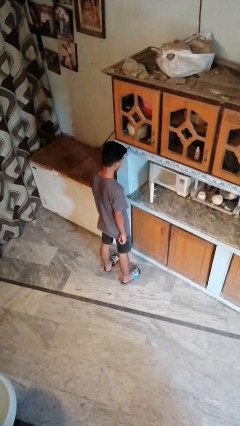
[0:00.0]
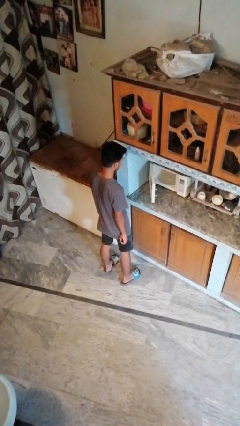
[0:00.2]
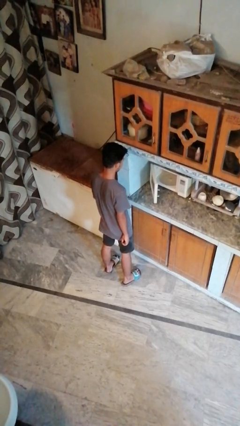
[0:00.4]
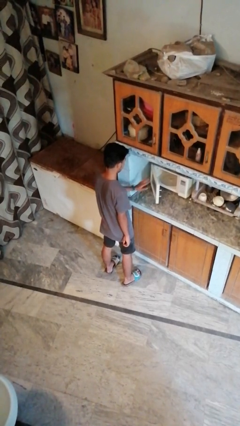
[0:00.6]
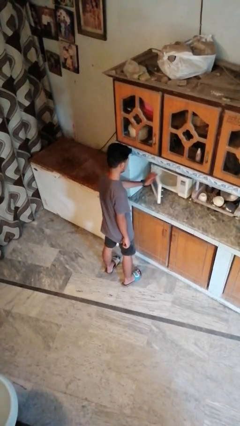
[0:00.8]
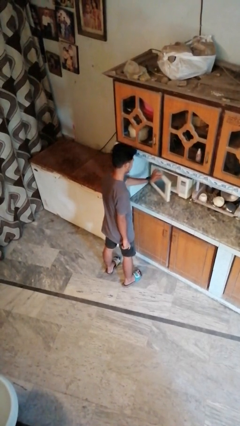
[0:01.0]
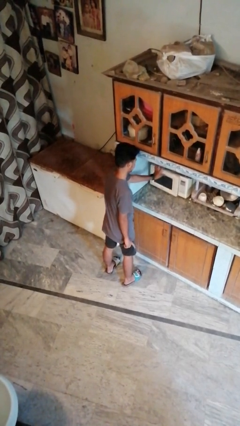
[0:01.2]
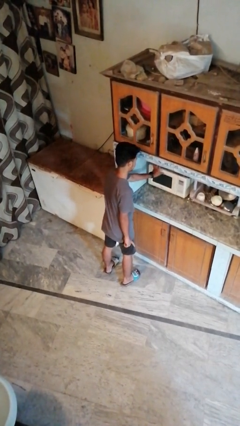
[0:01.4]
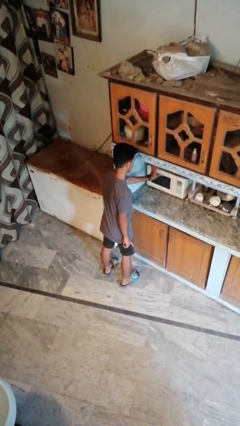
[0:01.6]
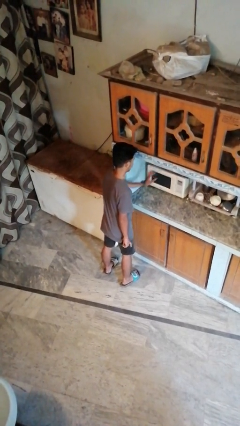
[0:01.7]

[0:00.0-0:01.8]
person closes oven door

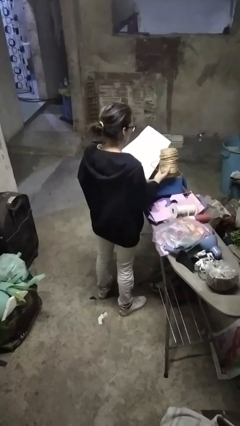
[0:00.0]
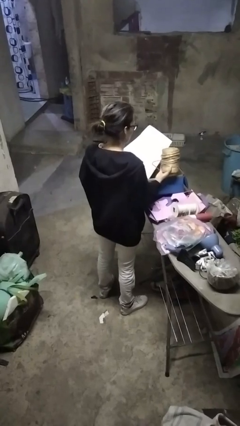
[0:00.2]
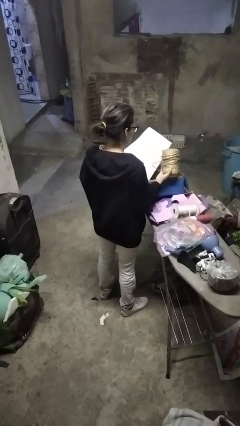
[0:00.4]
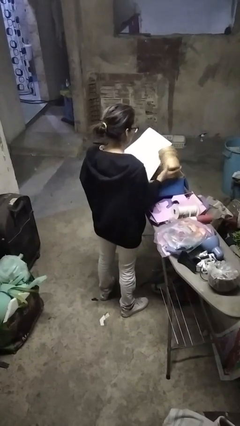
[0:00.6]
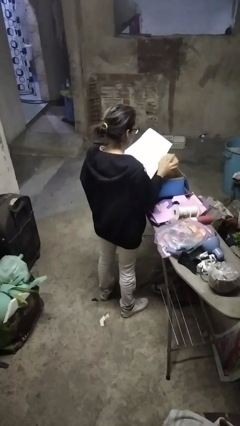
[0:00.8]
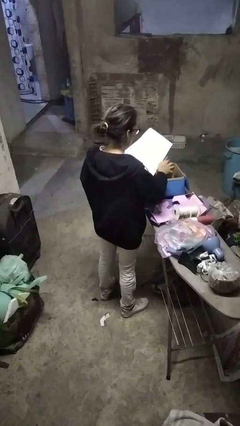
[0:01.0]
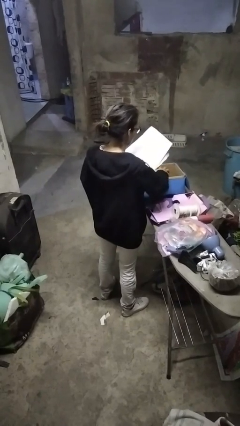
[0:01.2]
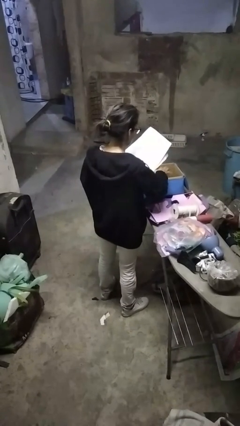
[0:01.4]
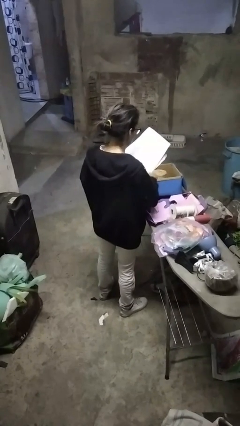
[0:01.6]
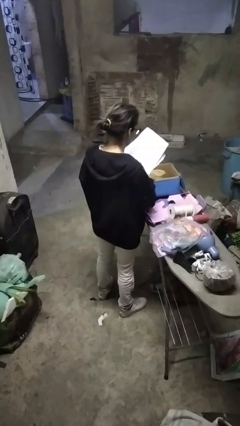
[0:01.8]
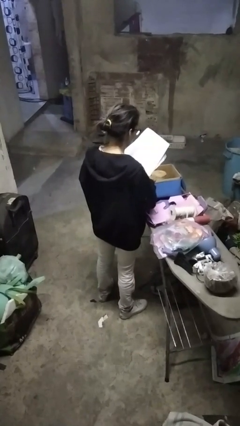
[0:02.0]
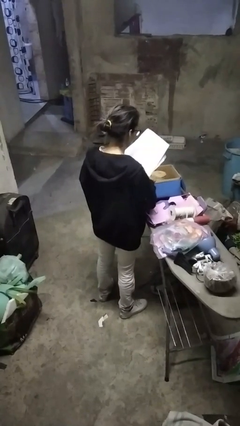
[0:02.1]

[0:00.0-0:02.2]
person puts object into box

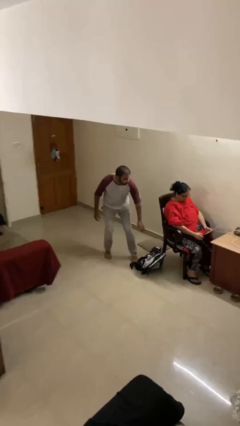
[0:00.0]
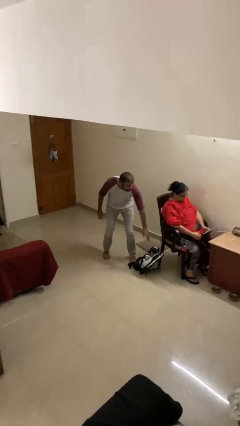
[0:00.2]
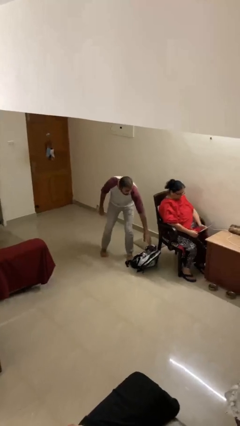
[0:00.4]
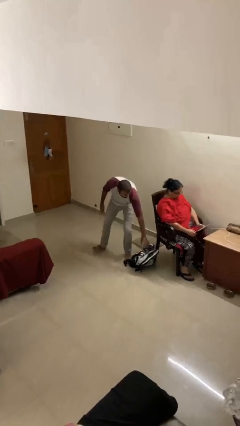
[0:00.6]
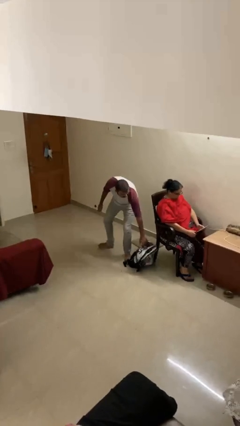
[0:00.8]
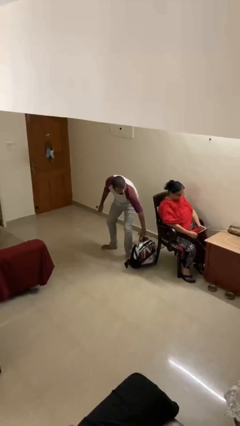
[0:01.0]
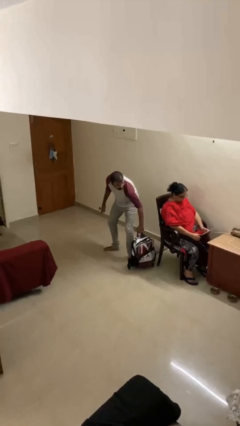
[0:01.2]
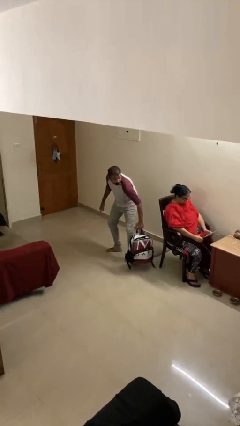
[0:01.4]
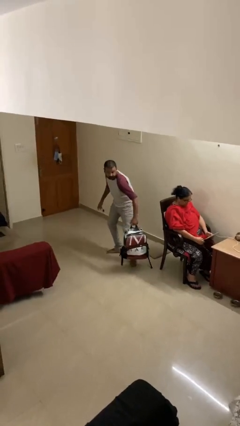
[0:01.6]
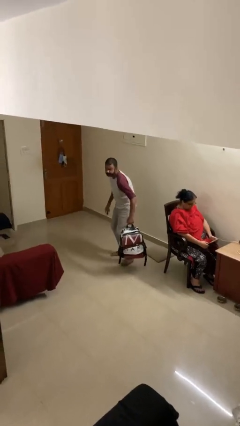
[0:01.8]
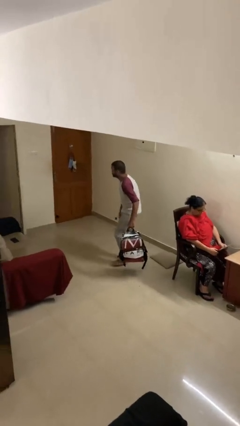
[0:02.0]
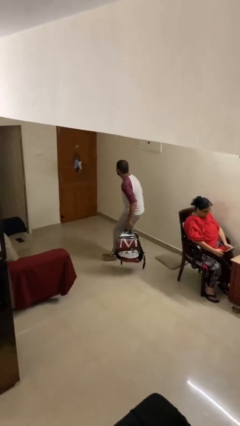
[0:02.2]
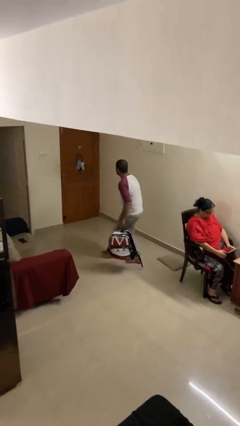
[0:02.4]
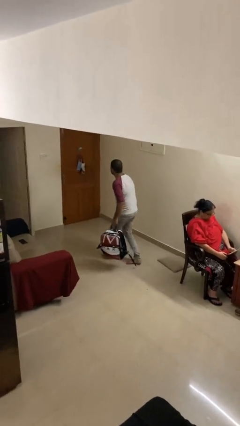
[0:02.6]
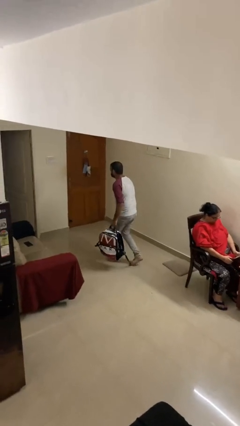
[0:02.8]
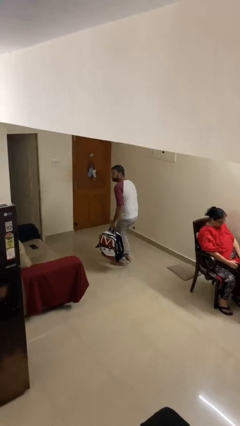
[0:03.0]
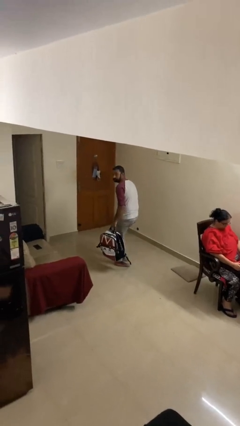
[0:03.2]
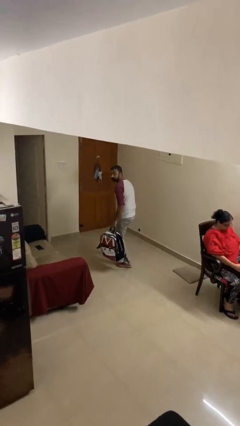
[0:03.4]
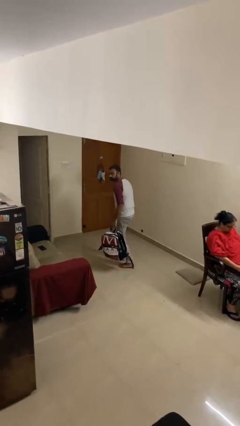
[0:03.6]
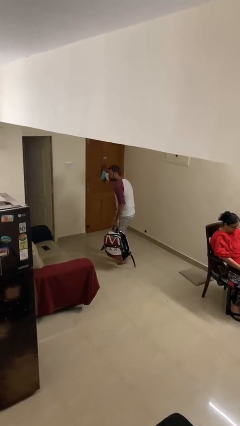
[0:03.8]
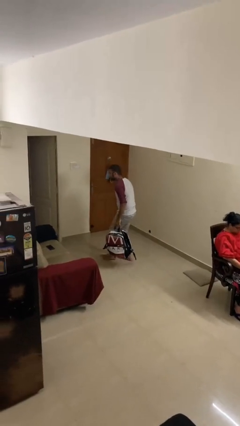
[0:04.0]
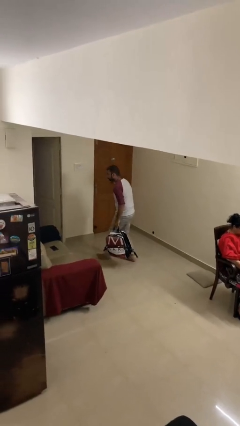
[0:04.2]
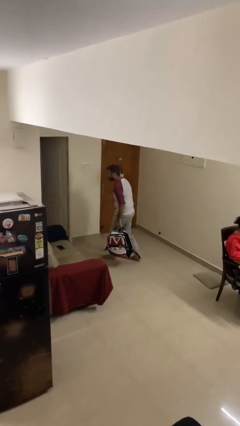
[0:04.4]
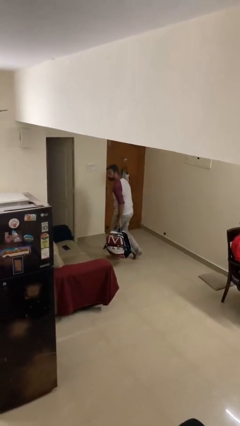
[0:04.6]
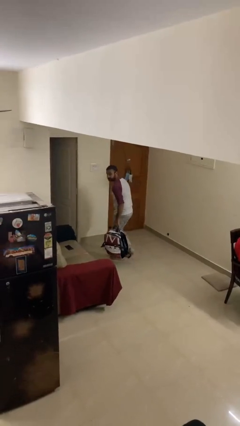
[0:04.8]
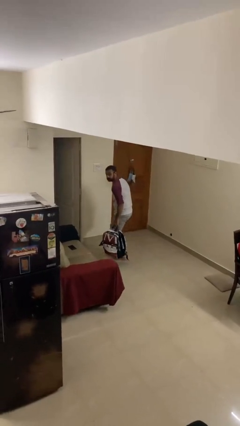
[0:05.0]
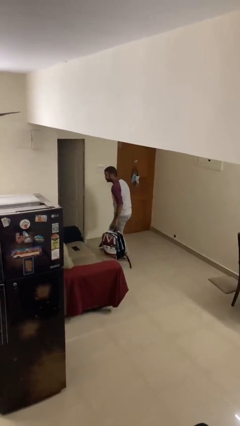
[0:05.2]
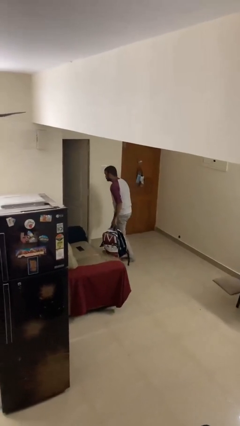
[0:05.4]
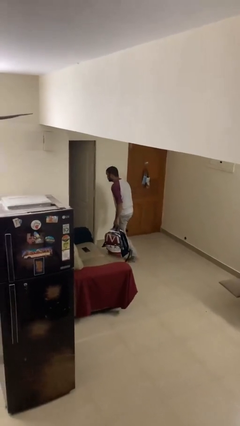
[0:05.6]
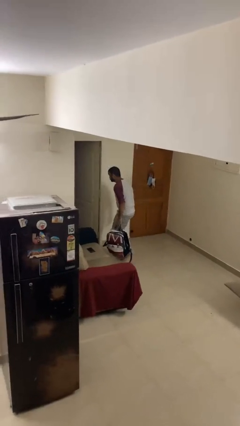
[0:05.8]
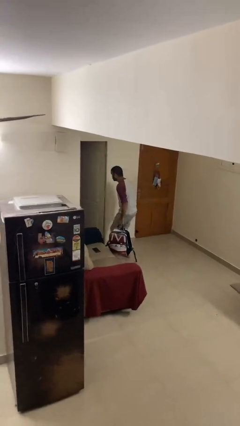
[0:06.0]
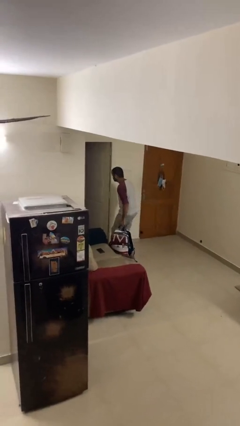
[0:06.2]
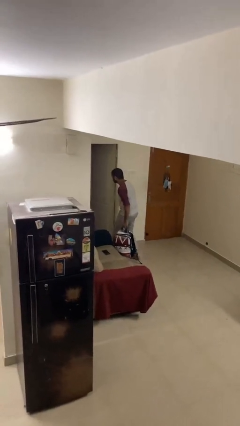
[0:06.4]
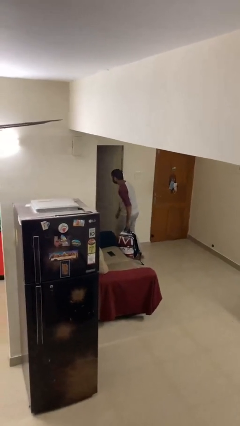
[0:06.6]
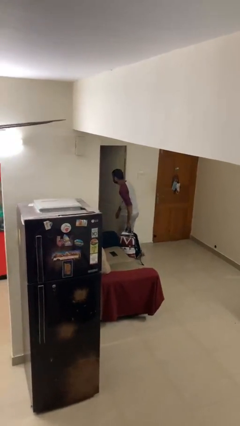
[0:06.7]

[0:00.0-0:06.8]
person steals object from person

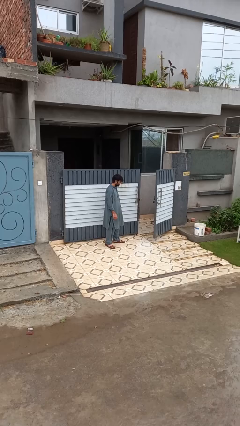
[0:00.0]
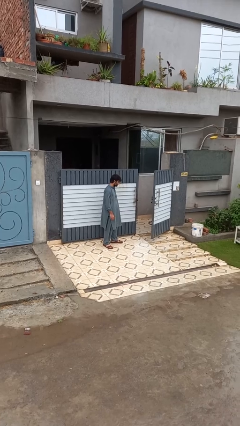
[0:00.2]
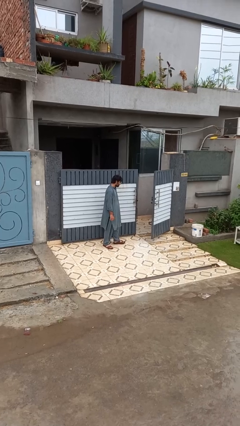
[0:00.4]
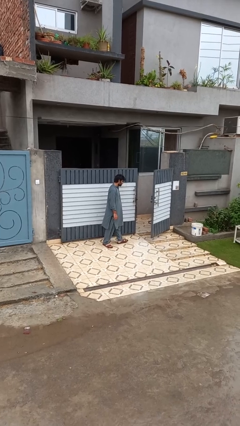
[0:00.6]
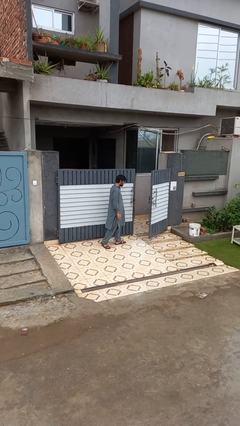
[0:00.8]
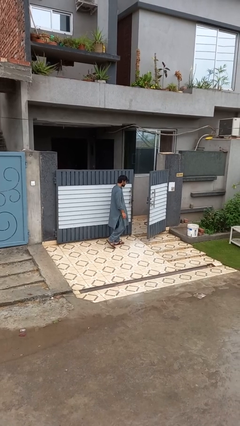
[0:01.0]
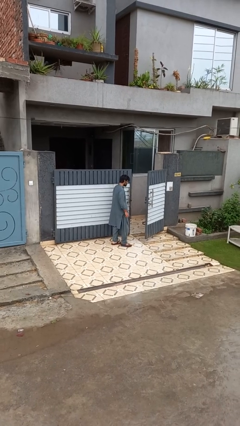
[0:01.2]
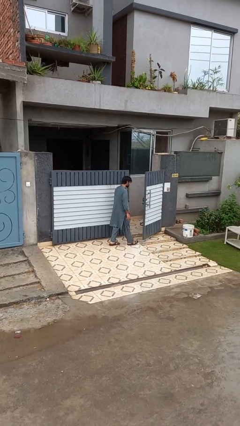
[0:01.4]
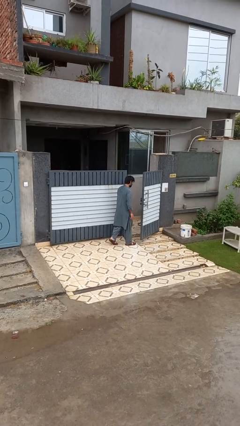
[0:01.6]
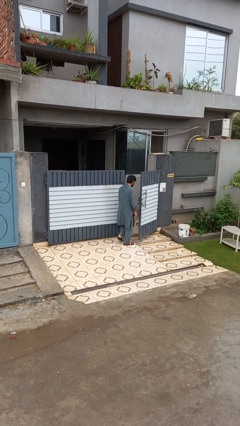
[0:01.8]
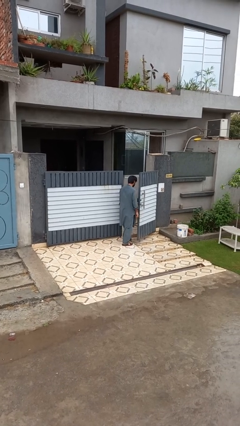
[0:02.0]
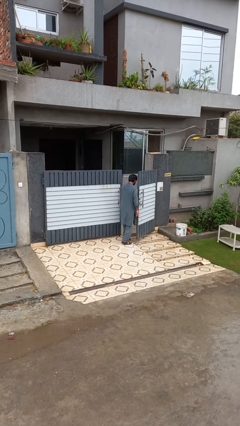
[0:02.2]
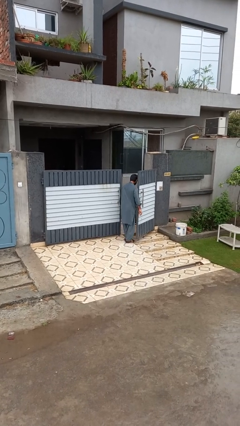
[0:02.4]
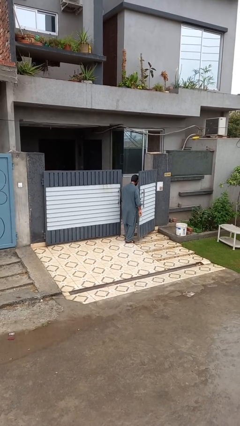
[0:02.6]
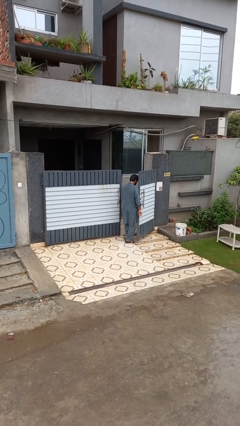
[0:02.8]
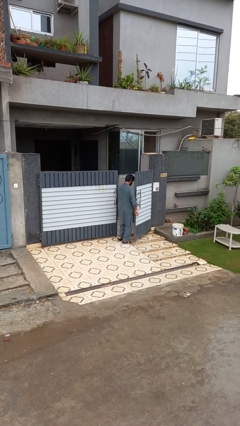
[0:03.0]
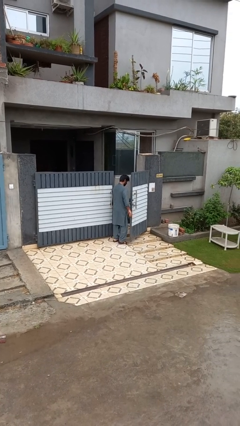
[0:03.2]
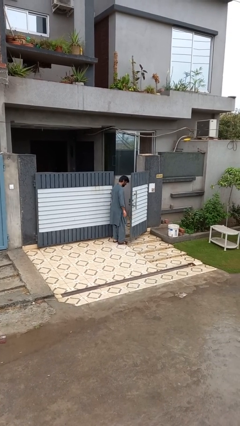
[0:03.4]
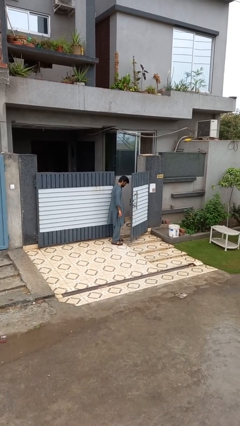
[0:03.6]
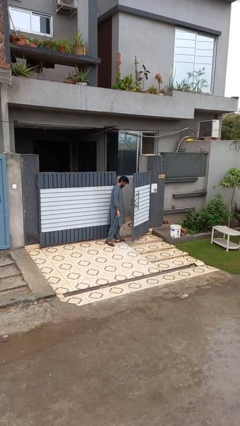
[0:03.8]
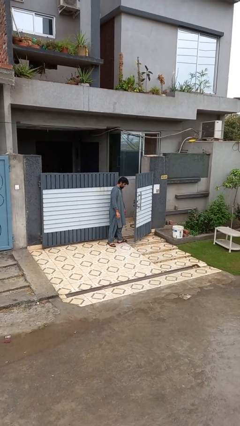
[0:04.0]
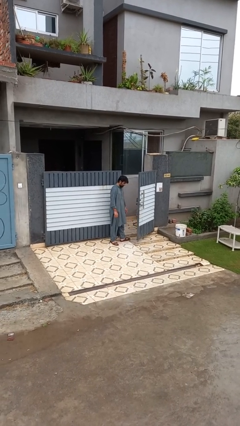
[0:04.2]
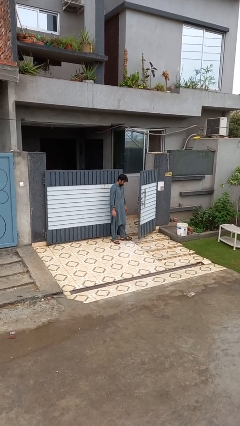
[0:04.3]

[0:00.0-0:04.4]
person bumps into wall

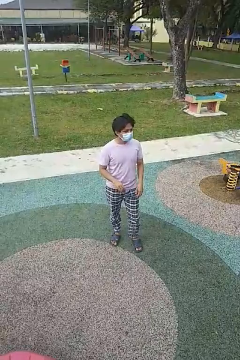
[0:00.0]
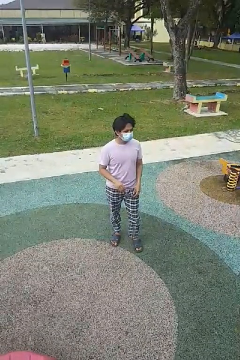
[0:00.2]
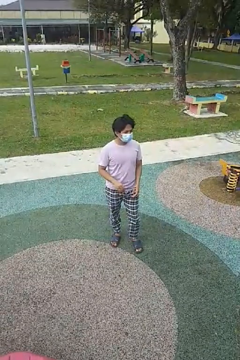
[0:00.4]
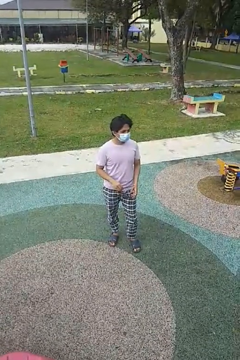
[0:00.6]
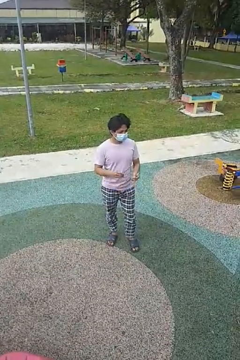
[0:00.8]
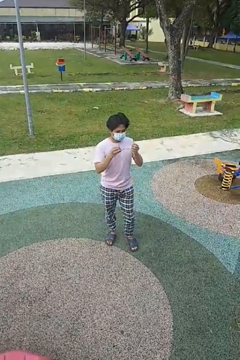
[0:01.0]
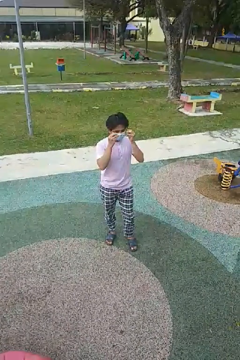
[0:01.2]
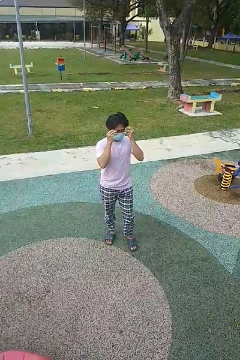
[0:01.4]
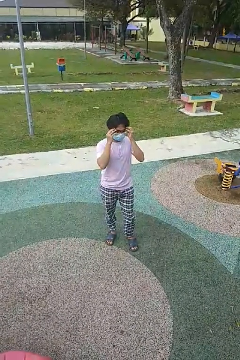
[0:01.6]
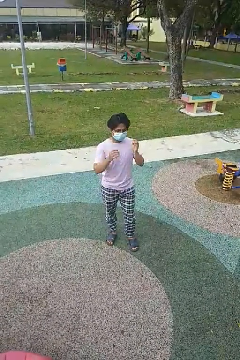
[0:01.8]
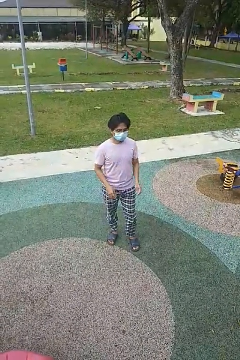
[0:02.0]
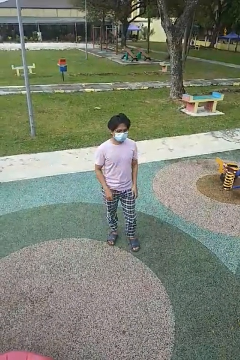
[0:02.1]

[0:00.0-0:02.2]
person puts on glasses

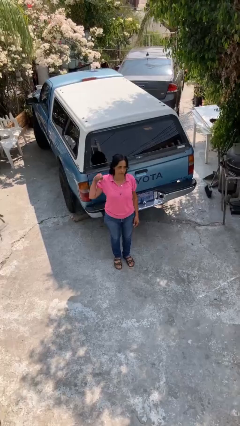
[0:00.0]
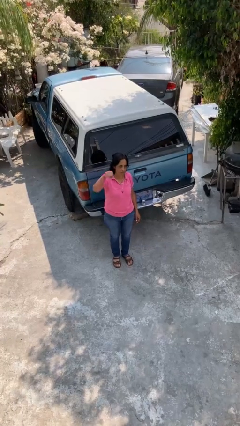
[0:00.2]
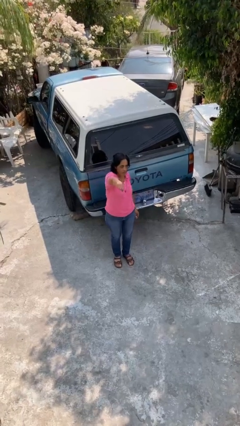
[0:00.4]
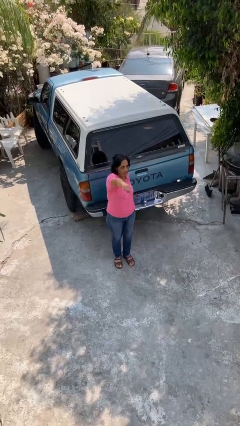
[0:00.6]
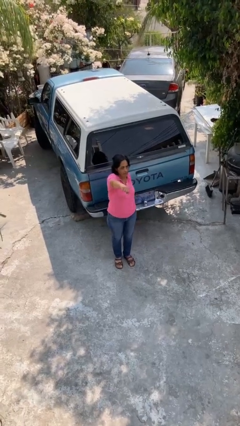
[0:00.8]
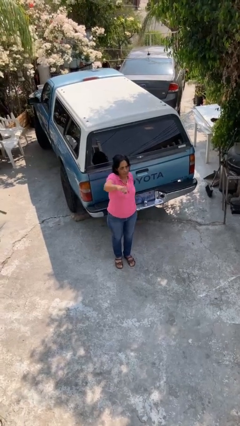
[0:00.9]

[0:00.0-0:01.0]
person karate chop
